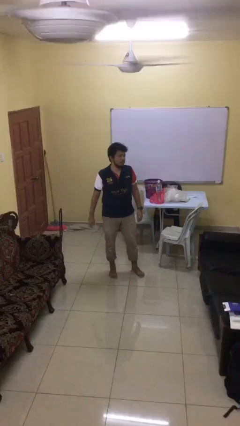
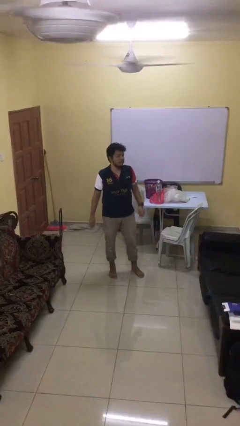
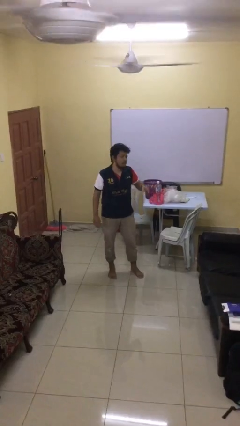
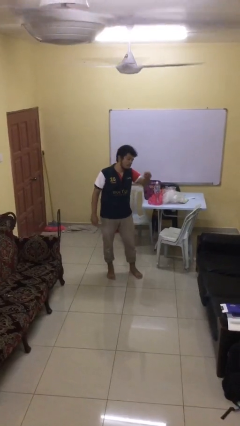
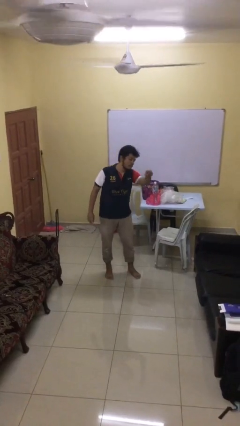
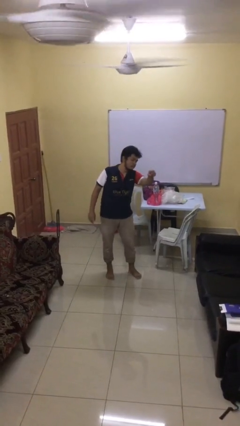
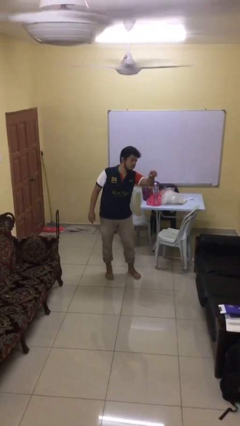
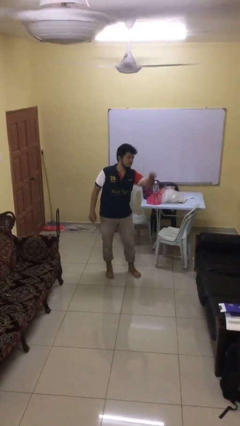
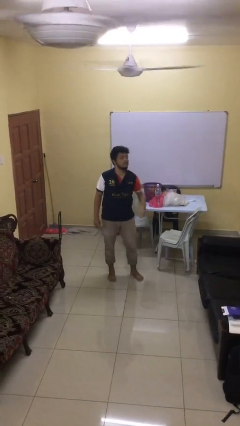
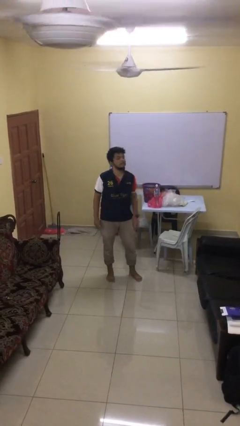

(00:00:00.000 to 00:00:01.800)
person points at person

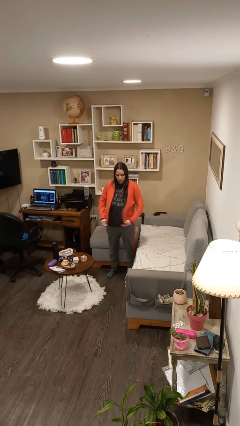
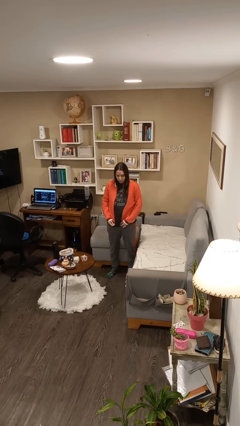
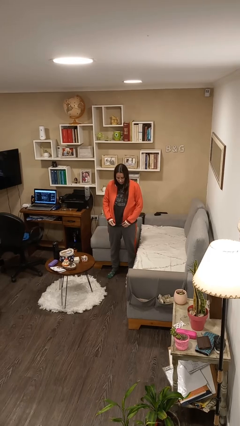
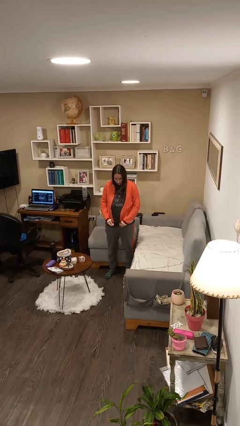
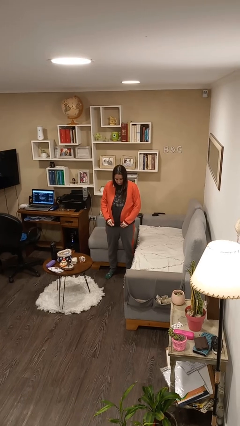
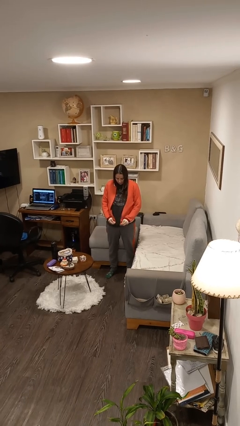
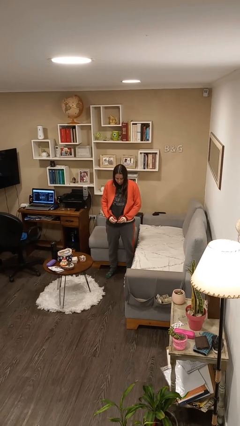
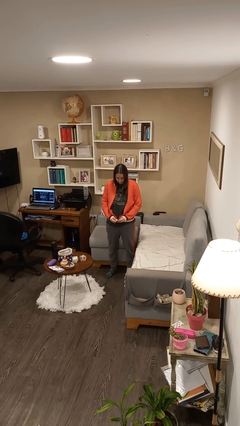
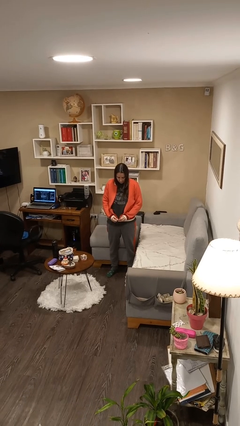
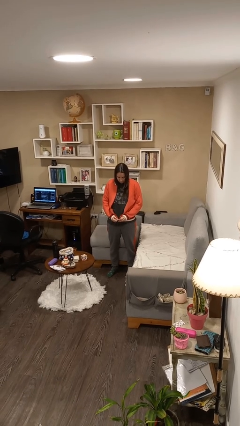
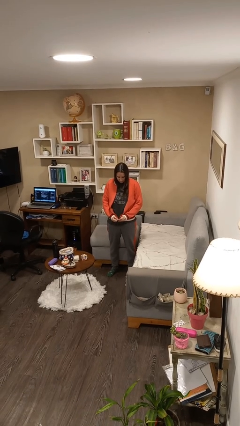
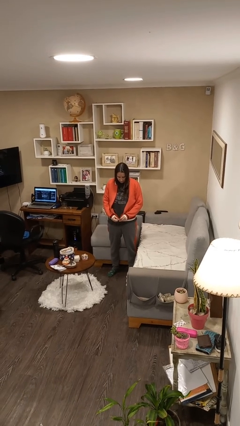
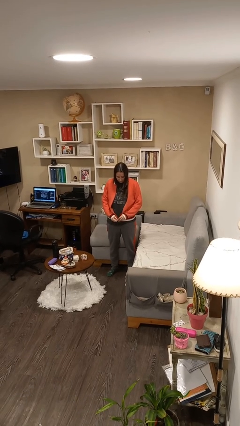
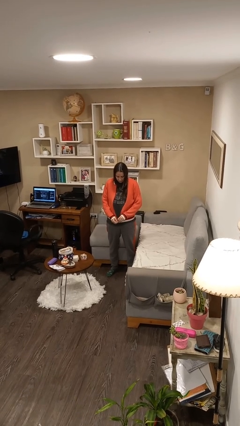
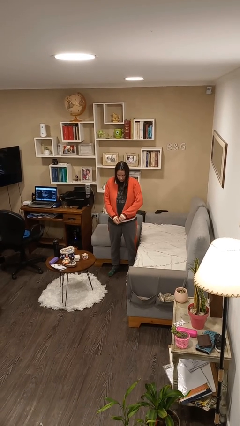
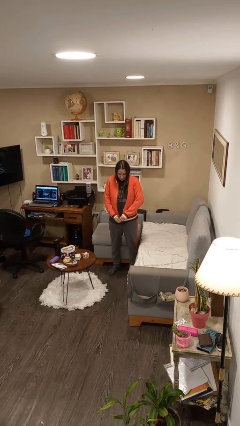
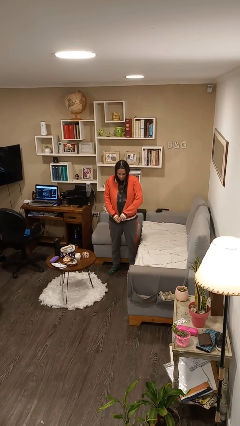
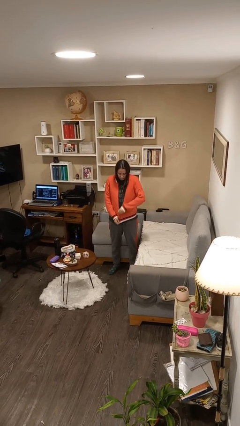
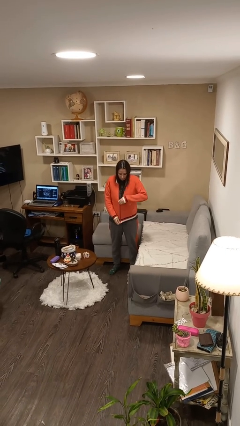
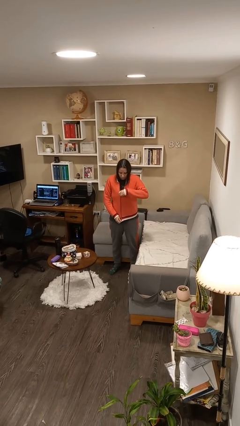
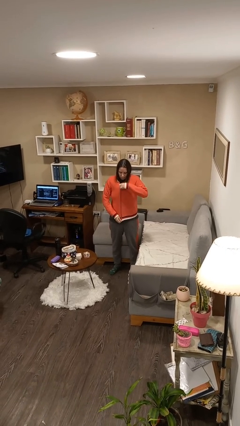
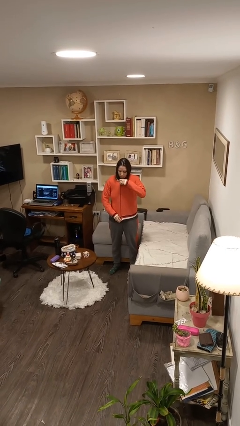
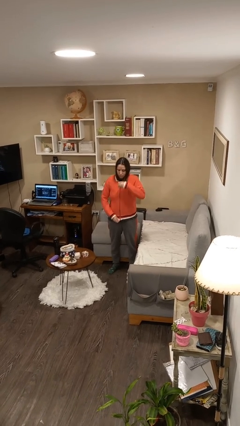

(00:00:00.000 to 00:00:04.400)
person zips up jacket

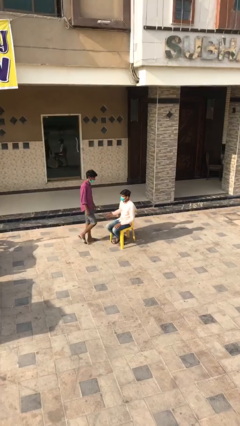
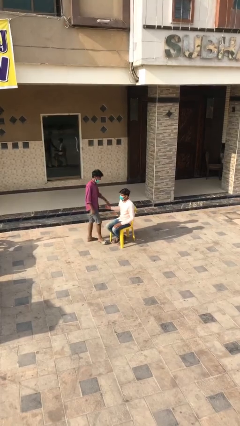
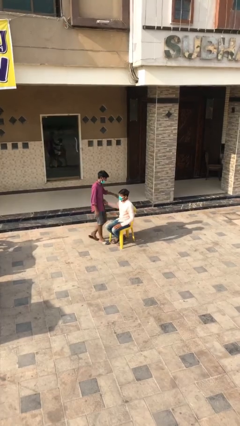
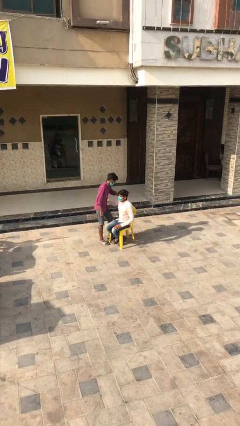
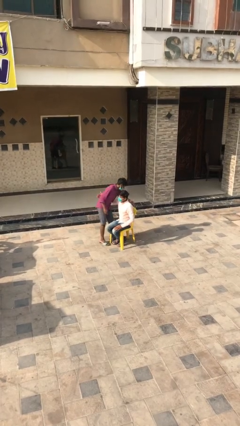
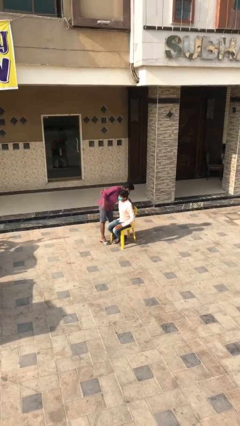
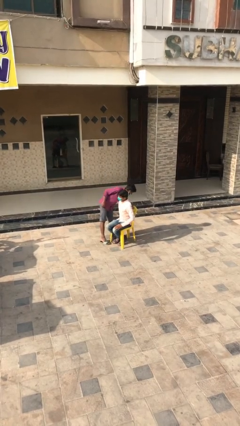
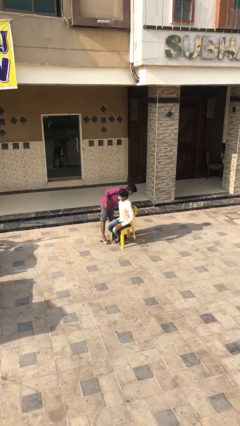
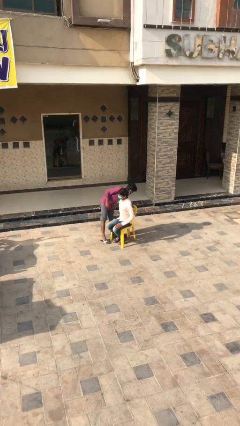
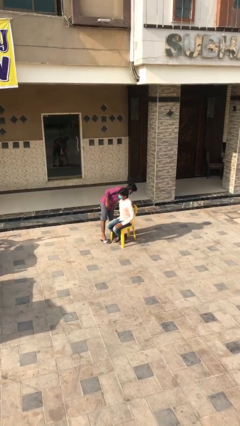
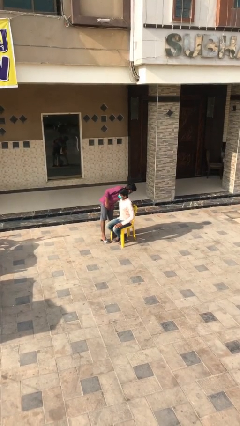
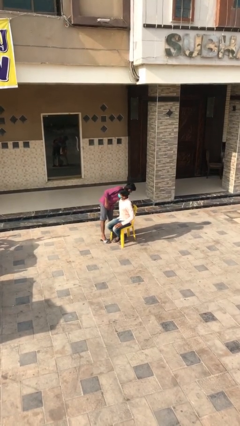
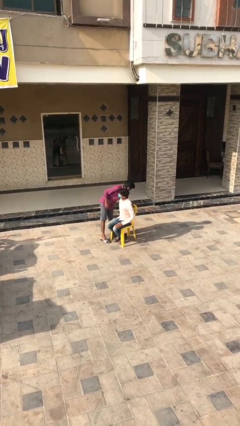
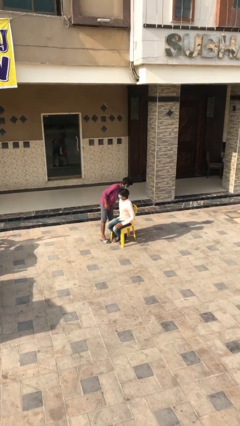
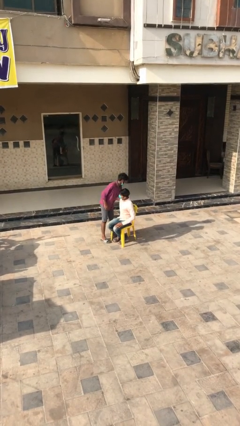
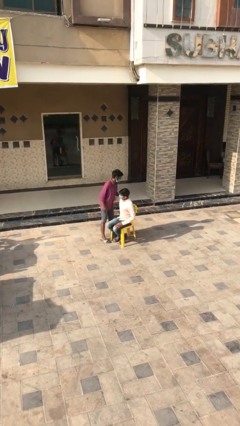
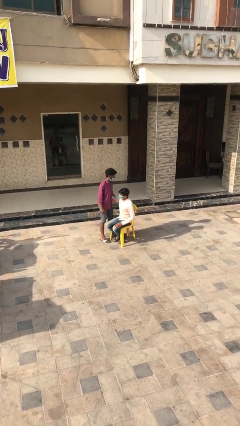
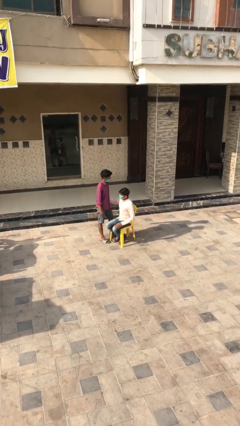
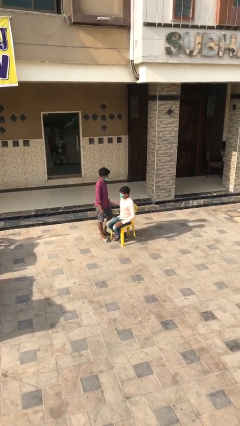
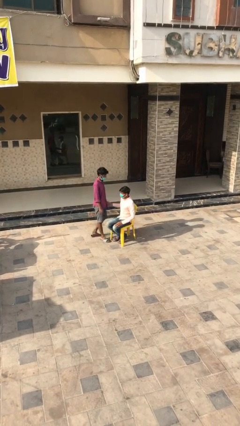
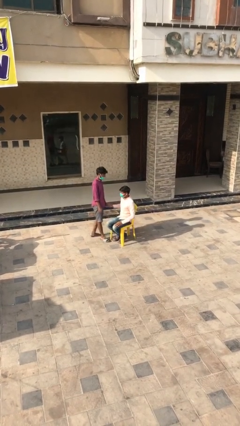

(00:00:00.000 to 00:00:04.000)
person embraces person

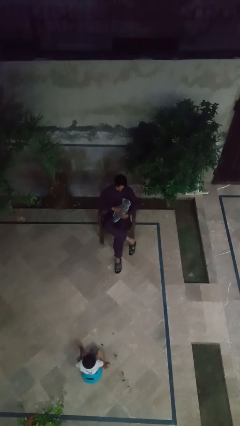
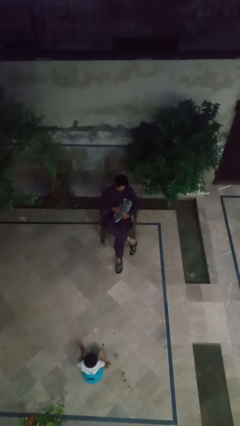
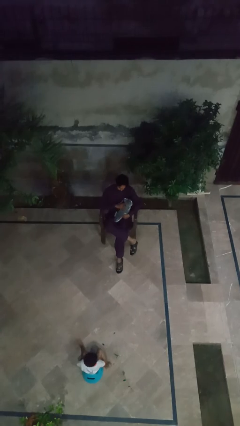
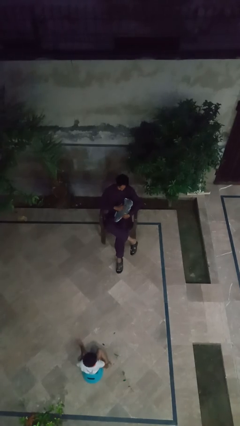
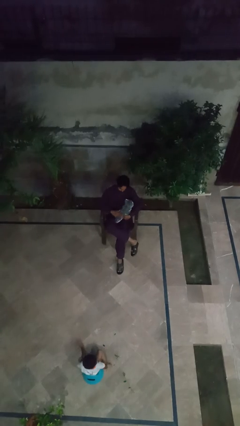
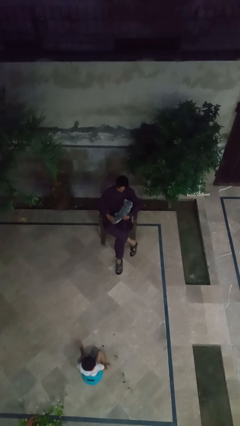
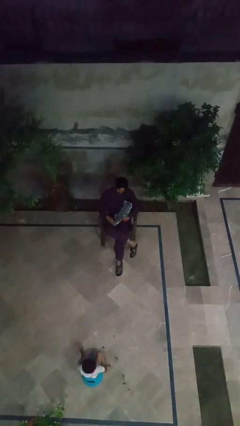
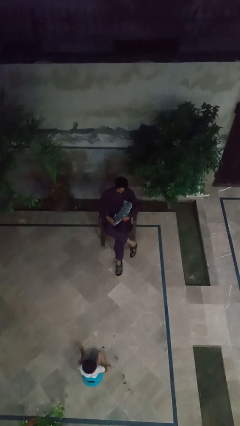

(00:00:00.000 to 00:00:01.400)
person pets cat

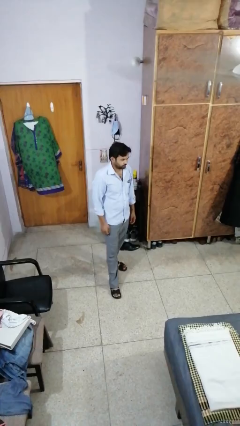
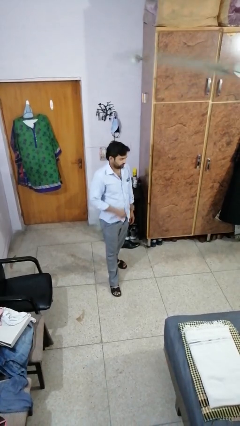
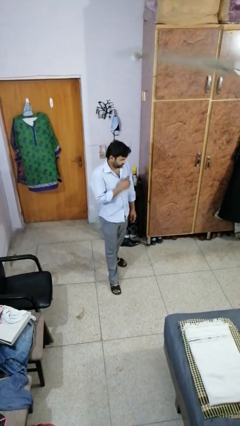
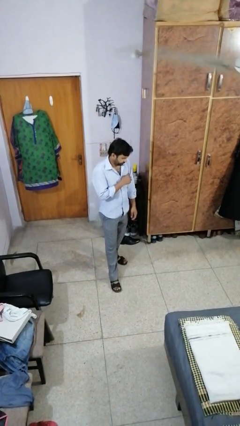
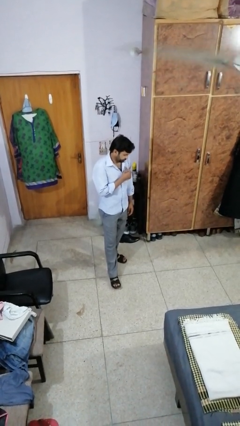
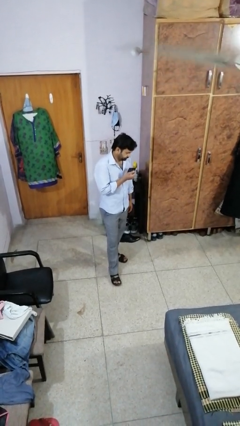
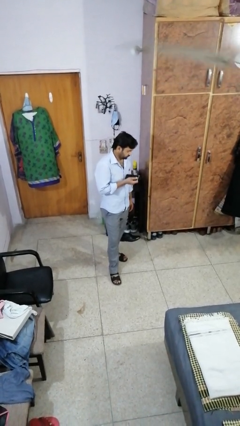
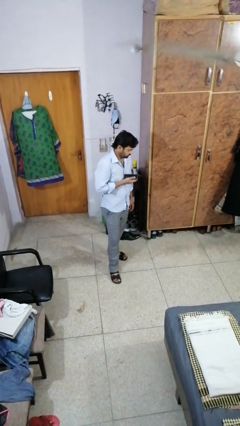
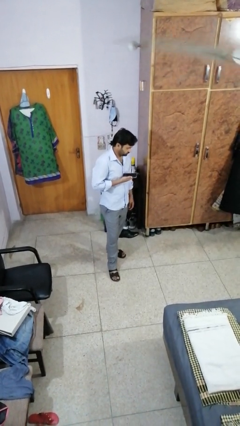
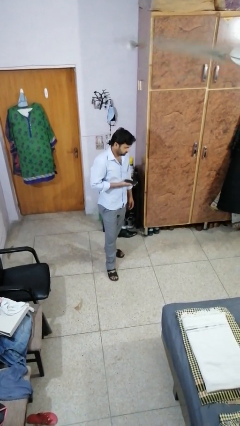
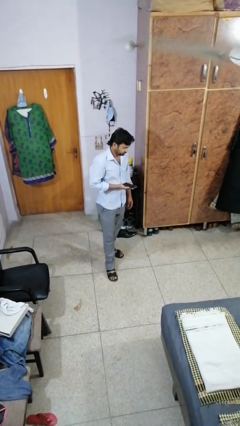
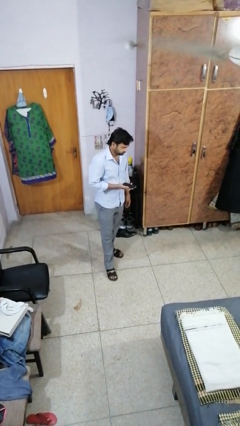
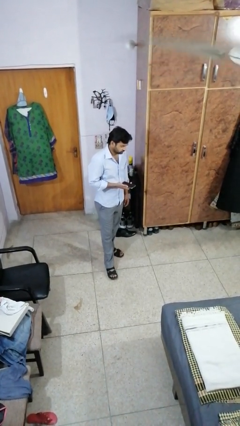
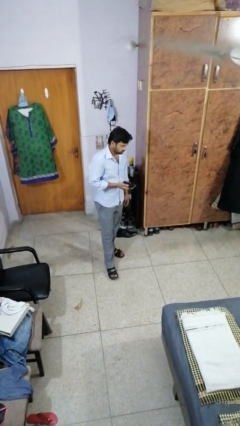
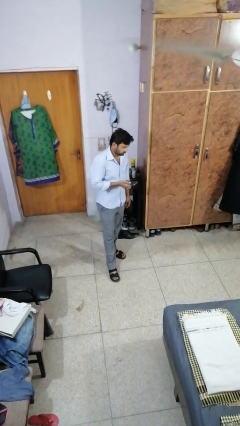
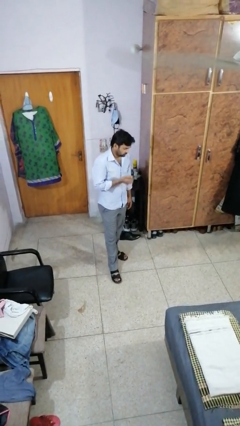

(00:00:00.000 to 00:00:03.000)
person takes phone from pocket

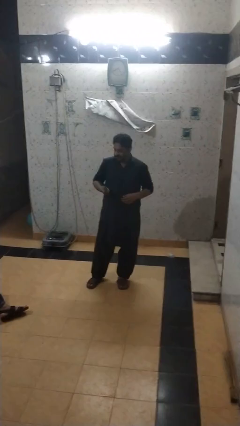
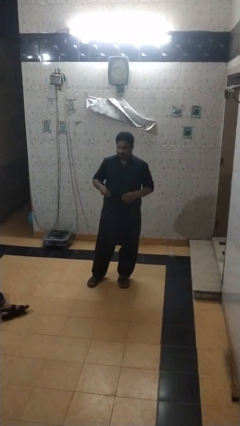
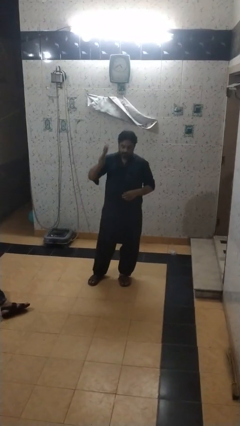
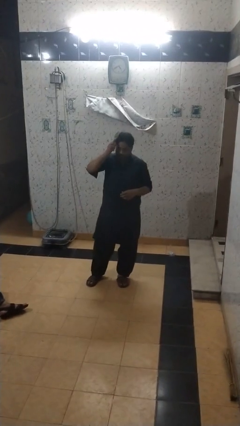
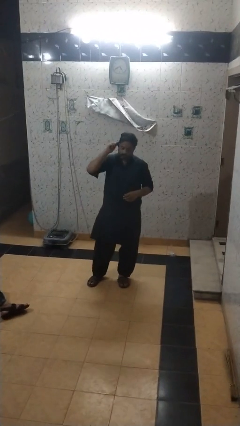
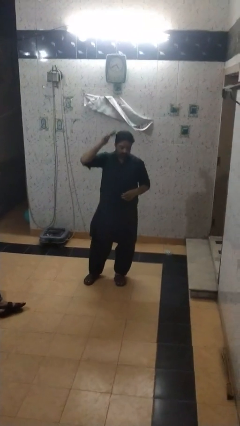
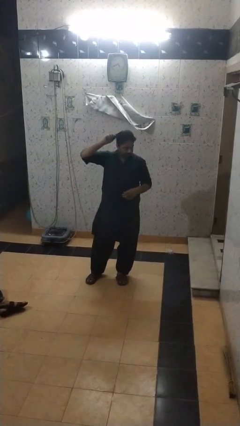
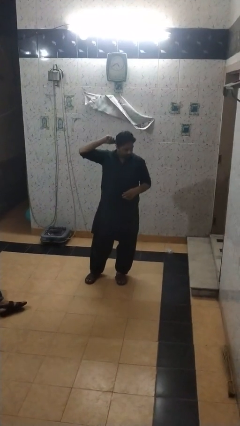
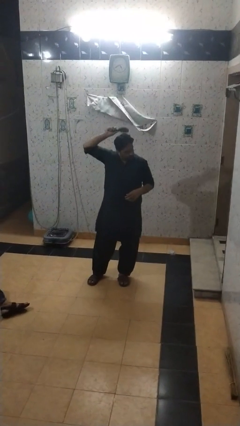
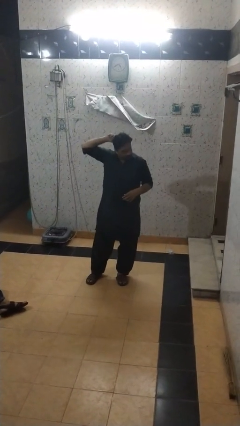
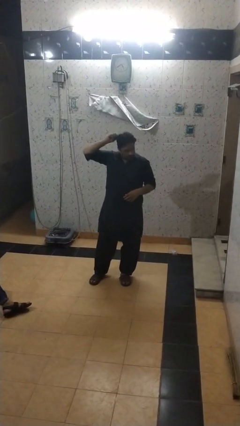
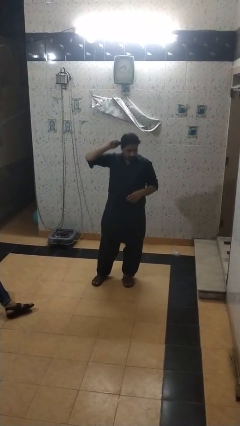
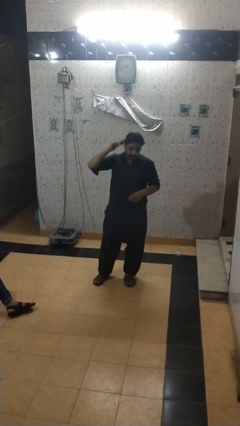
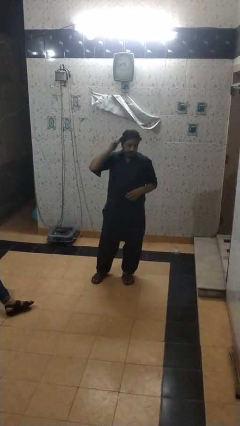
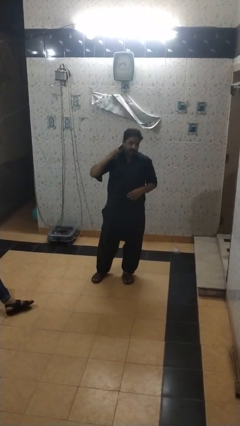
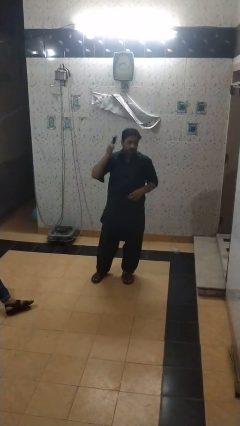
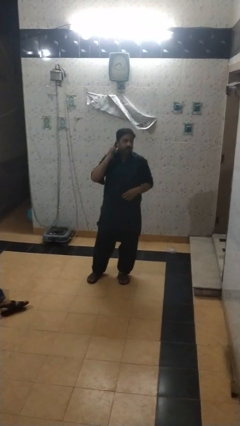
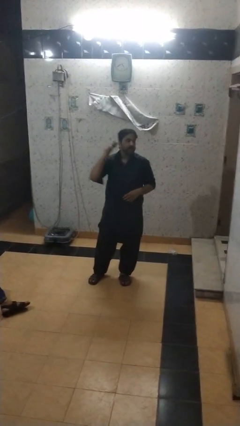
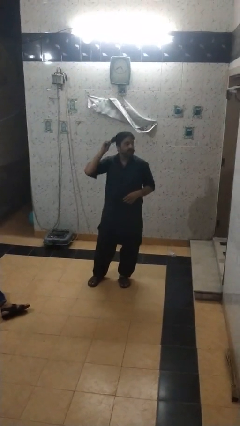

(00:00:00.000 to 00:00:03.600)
person brushes hair
